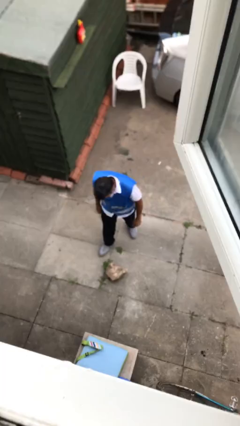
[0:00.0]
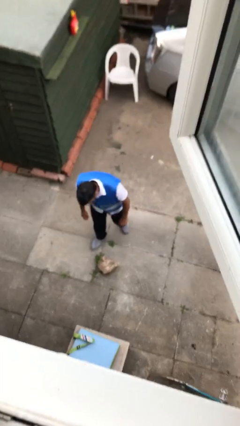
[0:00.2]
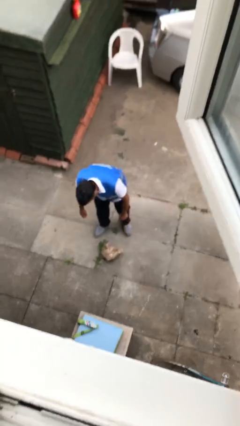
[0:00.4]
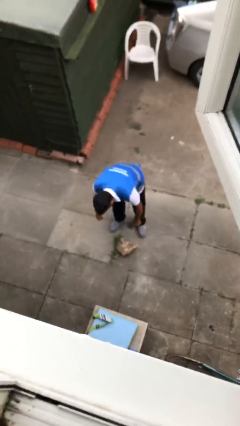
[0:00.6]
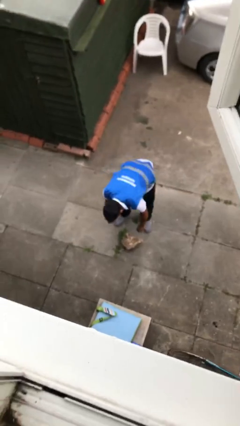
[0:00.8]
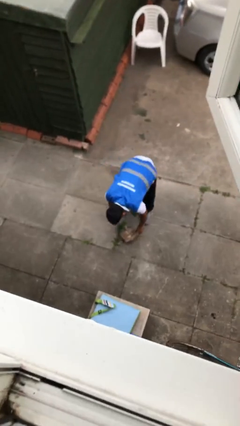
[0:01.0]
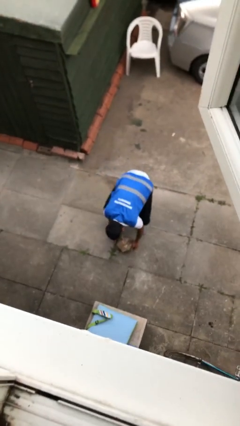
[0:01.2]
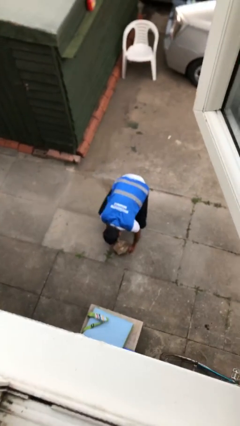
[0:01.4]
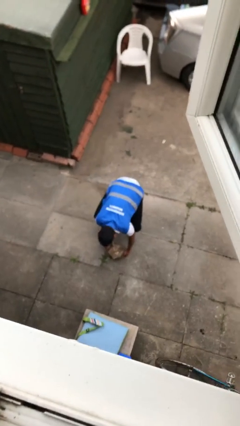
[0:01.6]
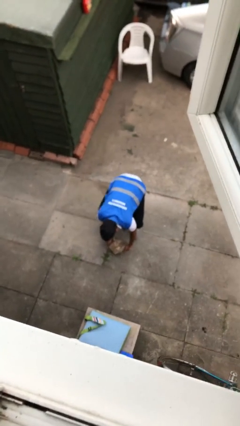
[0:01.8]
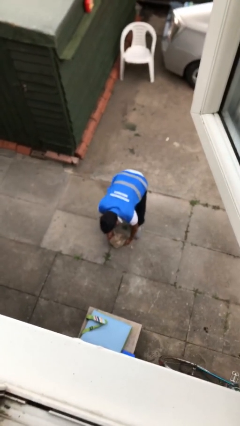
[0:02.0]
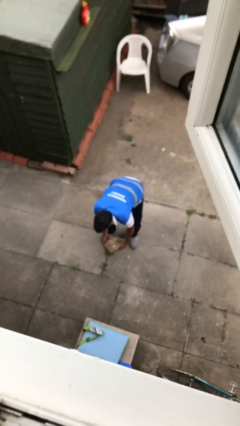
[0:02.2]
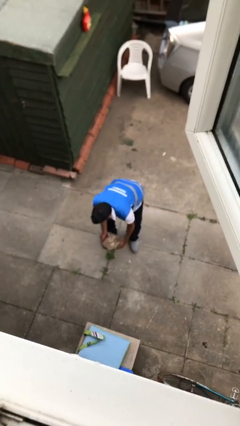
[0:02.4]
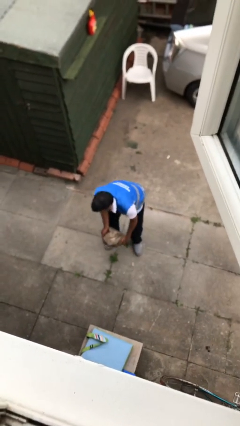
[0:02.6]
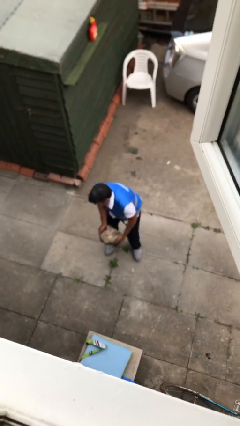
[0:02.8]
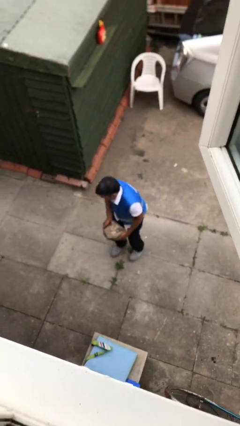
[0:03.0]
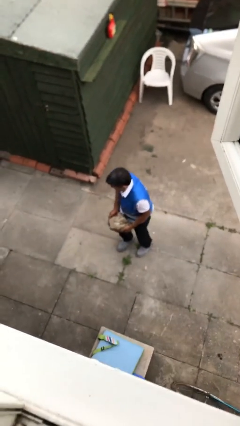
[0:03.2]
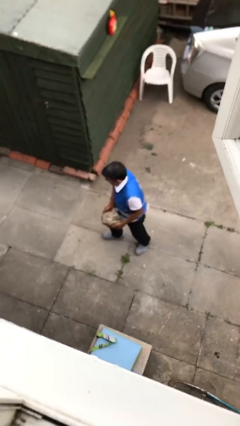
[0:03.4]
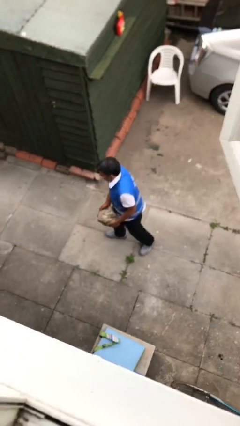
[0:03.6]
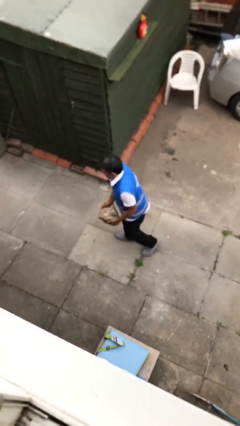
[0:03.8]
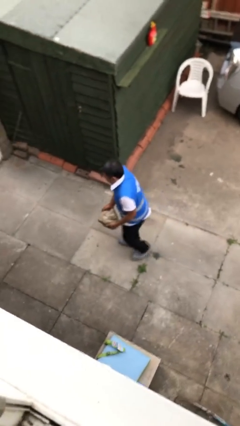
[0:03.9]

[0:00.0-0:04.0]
person picks up object from floor

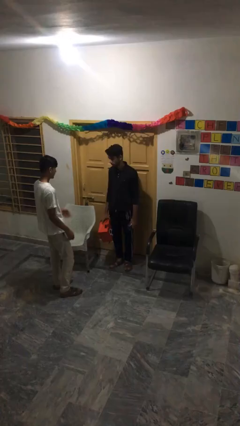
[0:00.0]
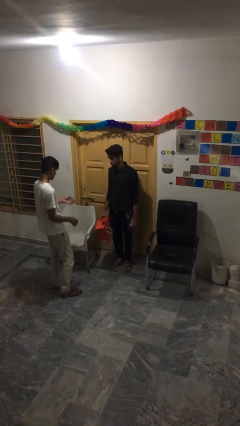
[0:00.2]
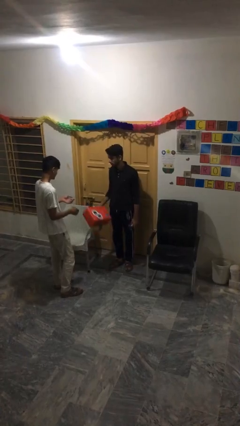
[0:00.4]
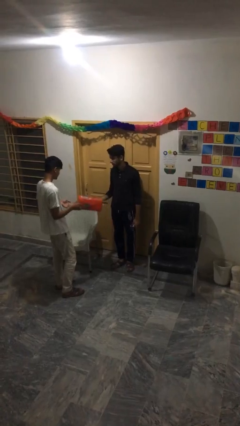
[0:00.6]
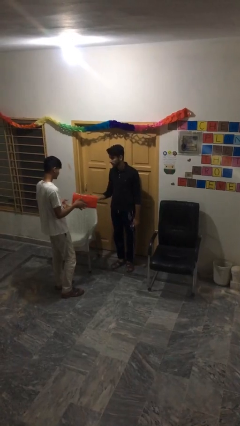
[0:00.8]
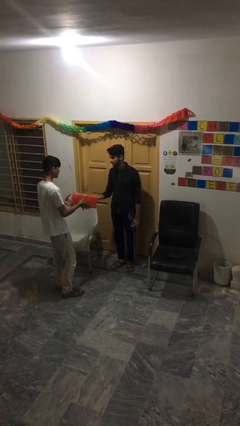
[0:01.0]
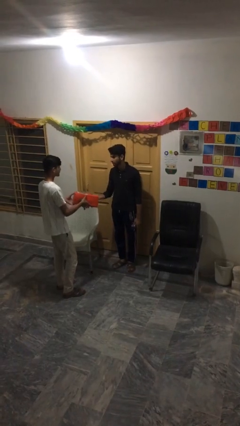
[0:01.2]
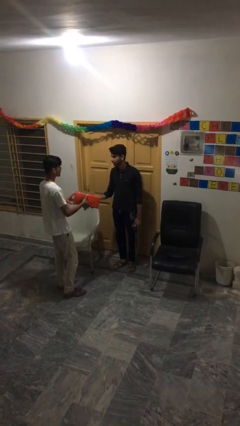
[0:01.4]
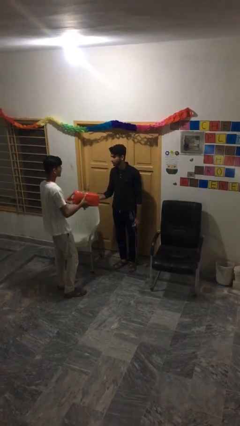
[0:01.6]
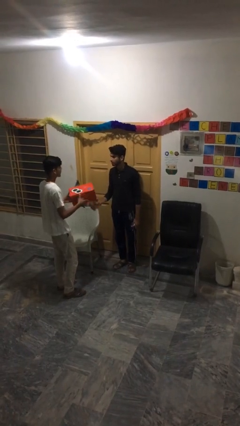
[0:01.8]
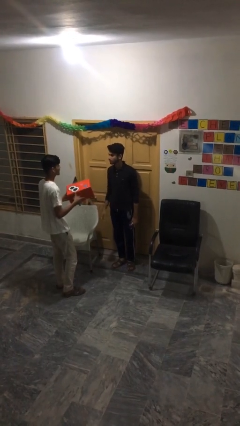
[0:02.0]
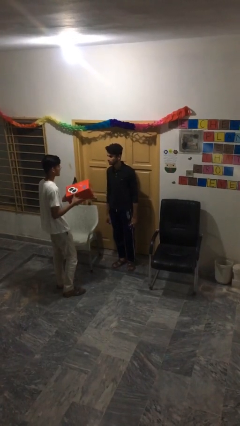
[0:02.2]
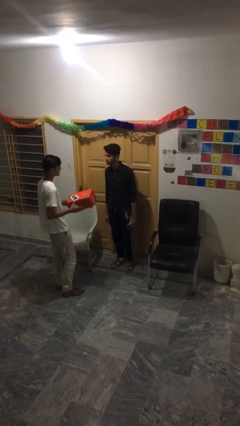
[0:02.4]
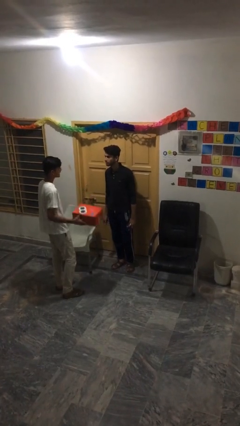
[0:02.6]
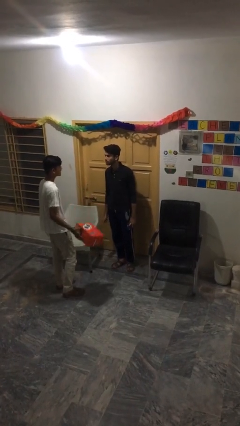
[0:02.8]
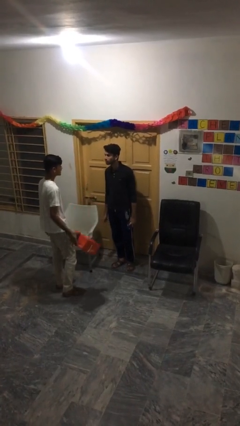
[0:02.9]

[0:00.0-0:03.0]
person transfers object to person

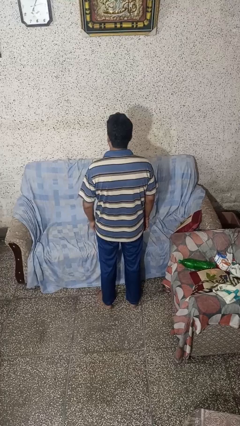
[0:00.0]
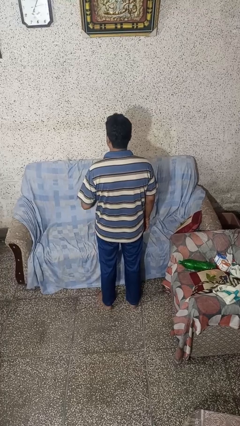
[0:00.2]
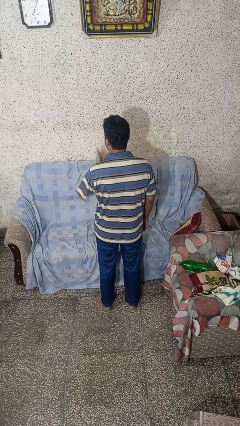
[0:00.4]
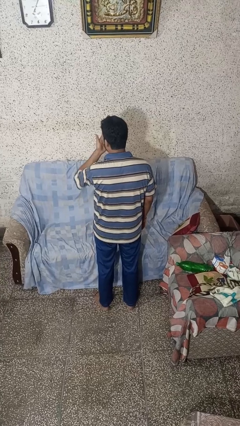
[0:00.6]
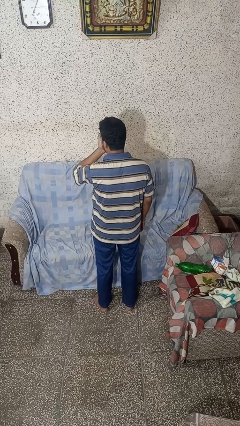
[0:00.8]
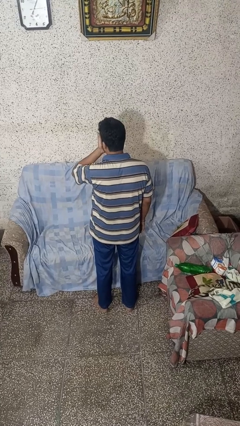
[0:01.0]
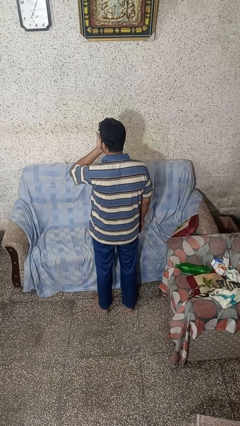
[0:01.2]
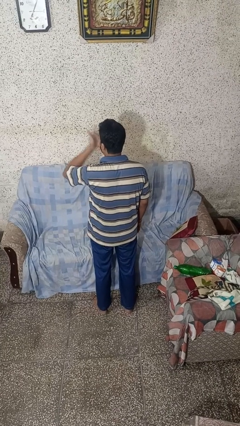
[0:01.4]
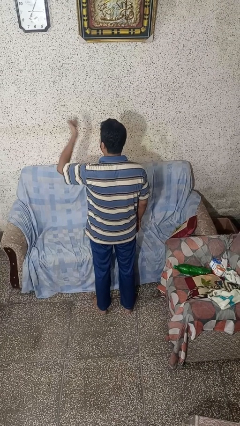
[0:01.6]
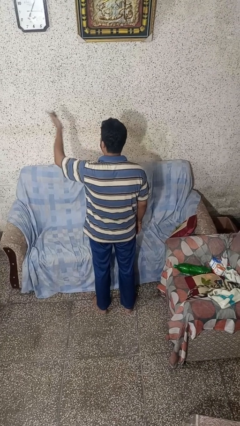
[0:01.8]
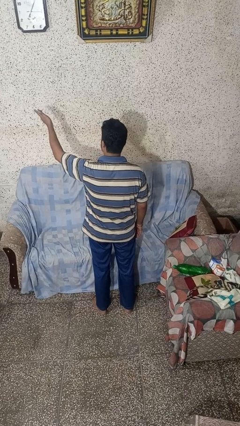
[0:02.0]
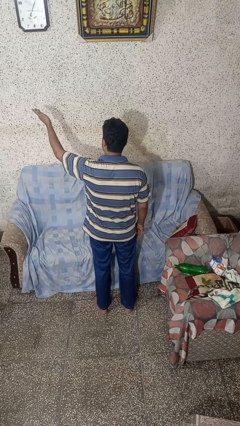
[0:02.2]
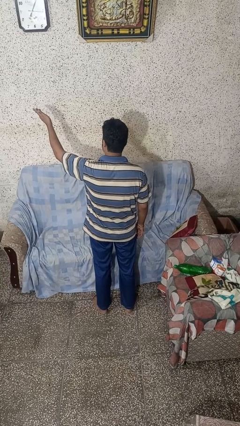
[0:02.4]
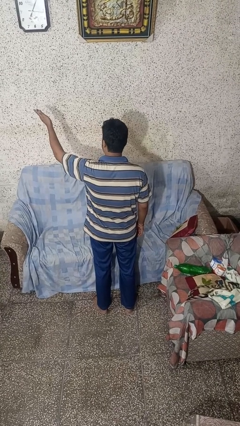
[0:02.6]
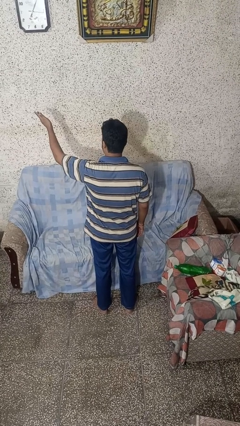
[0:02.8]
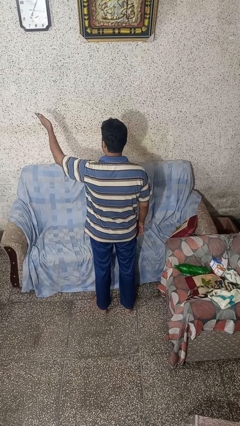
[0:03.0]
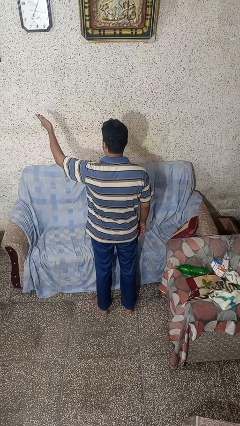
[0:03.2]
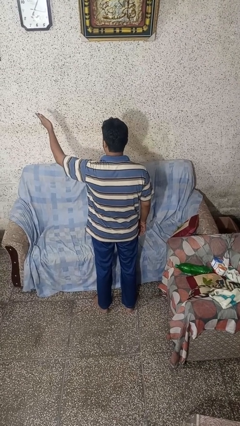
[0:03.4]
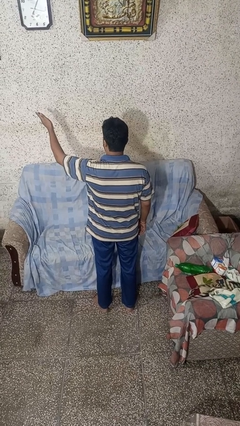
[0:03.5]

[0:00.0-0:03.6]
person gestures blow kiss

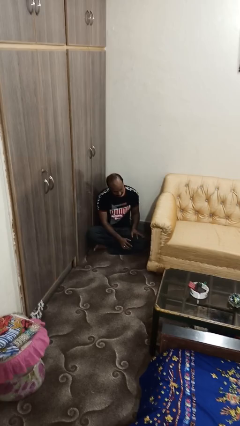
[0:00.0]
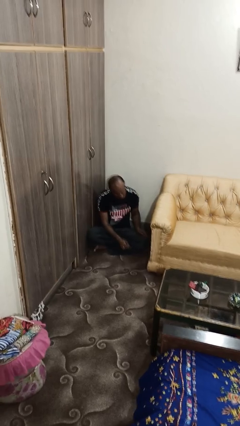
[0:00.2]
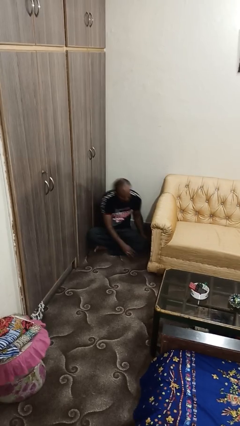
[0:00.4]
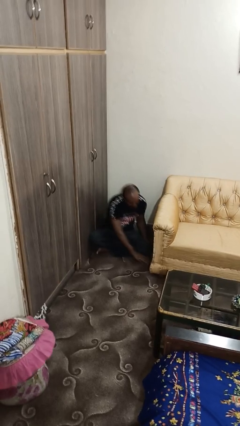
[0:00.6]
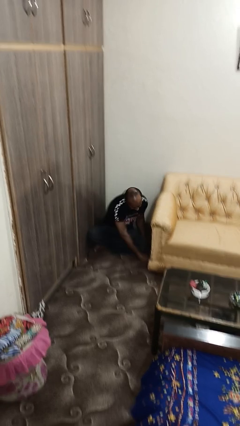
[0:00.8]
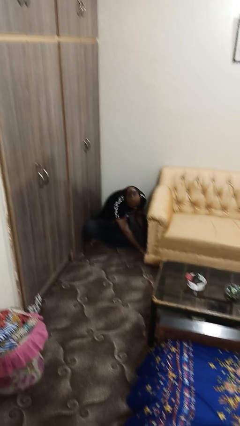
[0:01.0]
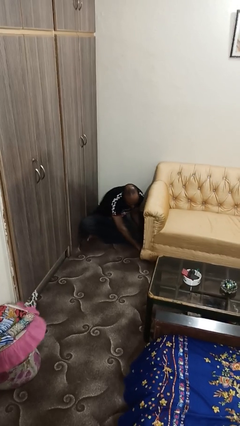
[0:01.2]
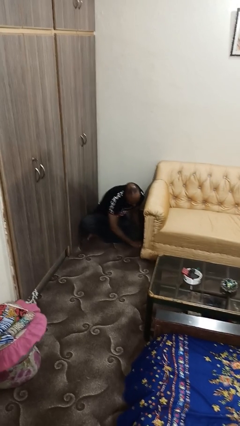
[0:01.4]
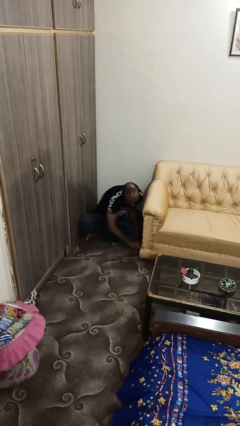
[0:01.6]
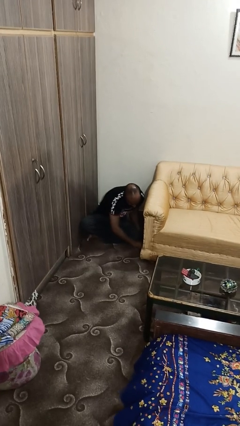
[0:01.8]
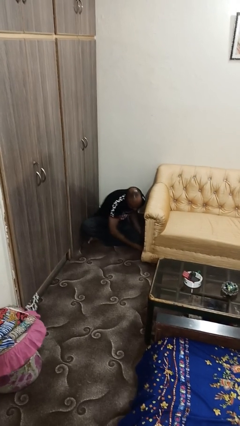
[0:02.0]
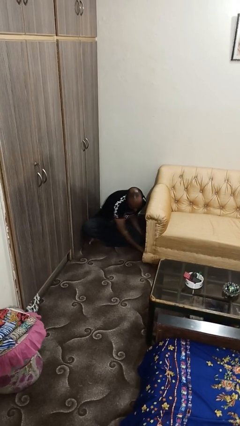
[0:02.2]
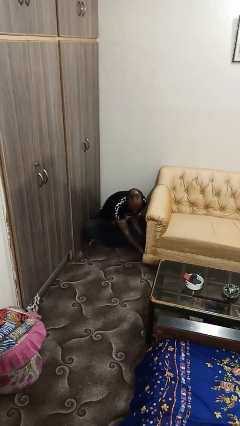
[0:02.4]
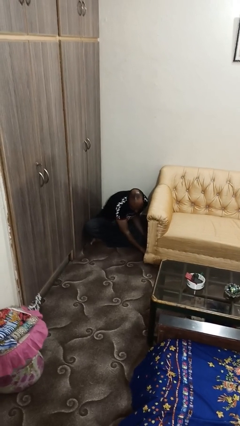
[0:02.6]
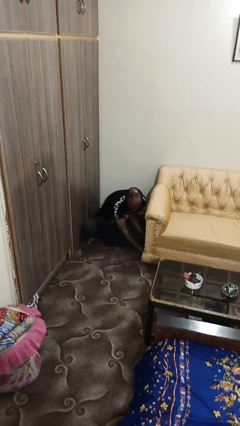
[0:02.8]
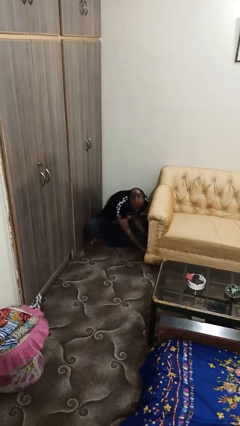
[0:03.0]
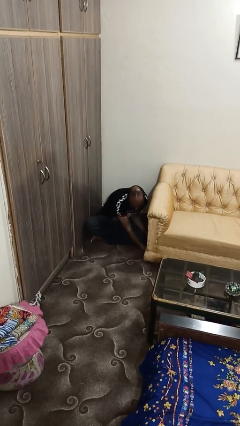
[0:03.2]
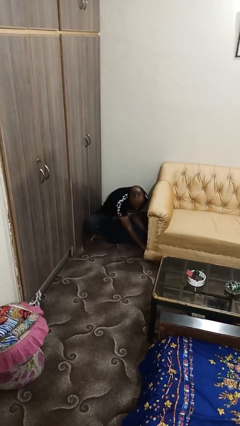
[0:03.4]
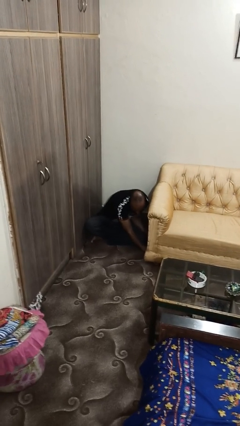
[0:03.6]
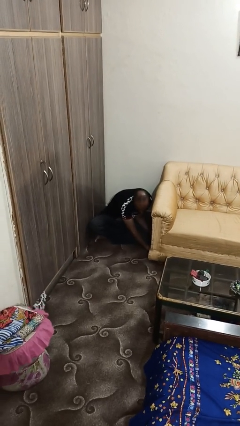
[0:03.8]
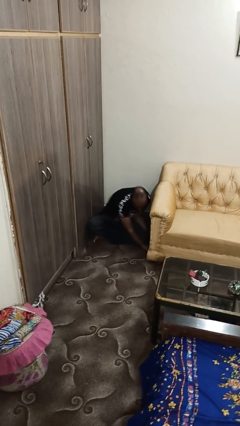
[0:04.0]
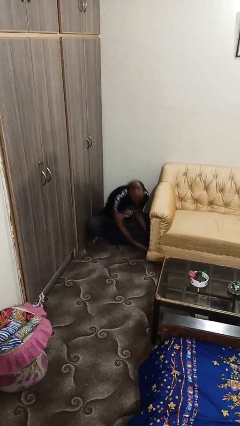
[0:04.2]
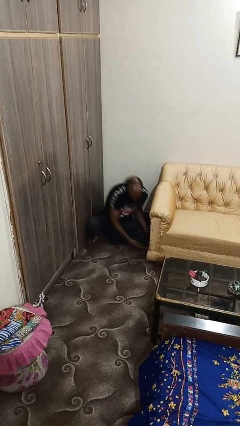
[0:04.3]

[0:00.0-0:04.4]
person searches under couch

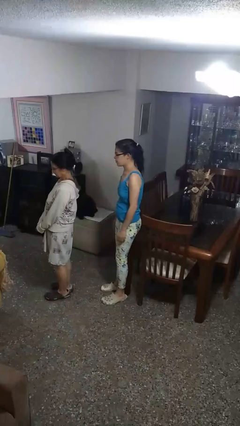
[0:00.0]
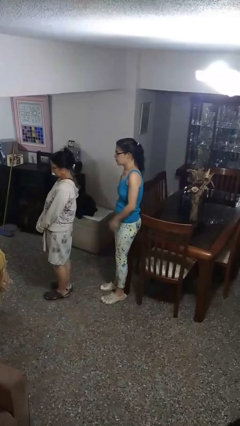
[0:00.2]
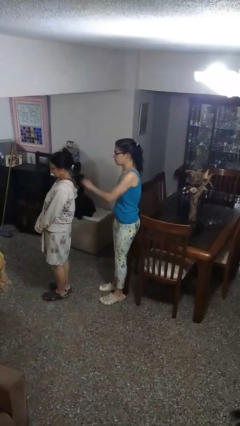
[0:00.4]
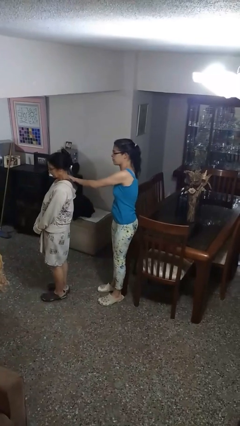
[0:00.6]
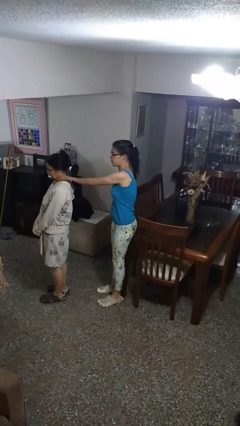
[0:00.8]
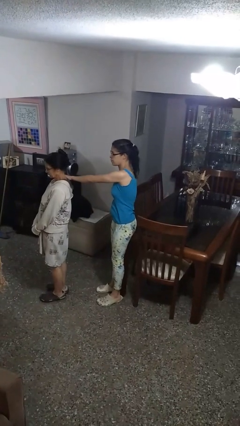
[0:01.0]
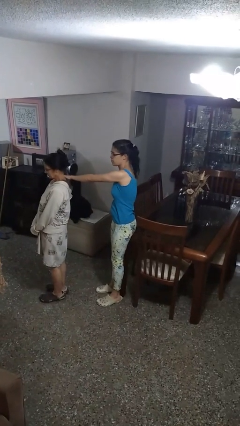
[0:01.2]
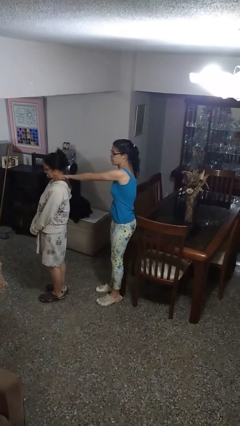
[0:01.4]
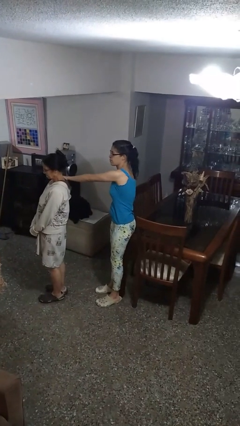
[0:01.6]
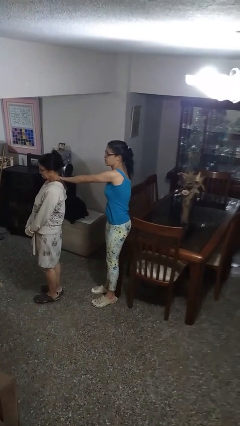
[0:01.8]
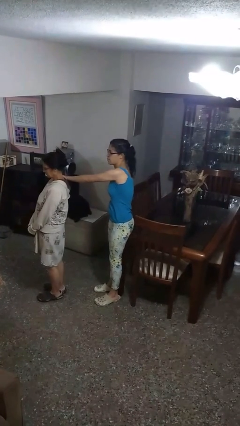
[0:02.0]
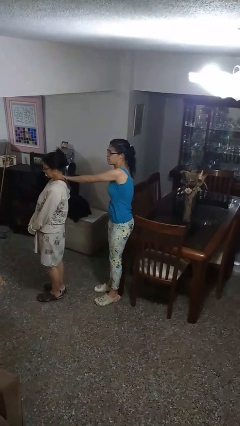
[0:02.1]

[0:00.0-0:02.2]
person grabs person by shoulder

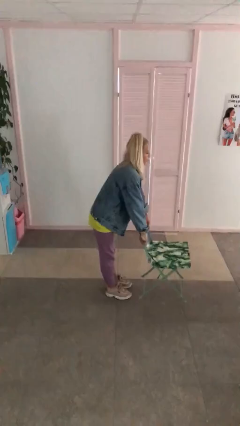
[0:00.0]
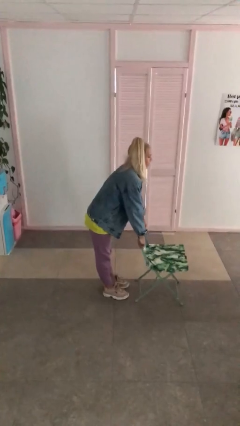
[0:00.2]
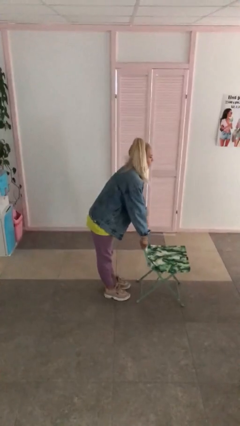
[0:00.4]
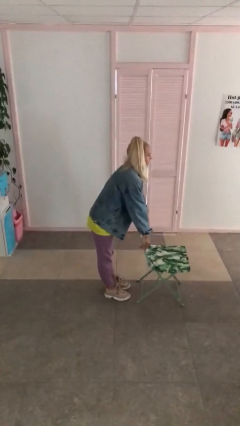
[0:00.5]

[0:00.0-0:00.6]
person puts down object on floor
